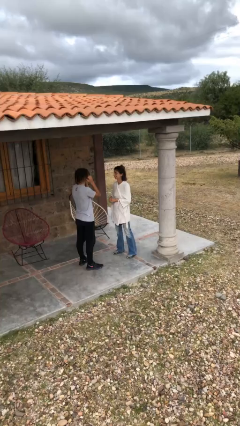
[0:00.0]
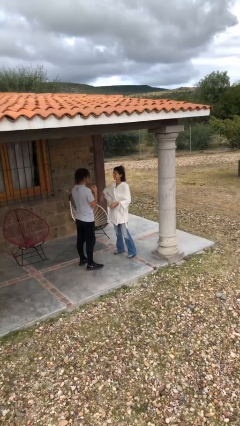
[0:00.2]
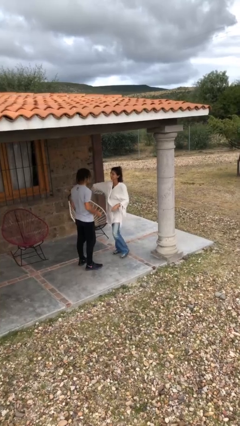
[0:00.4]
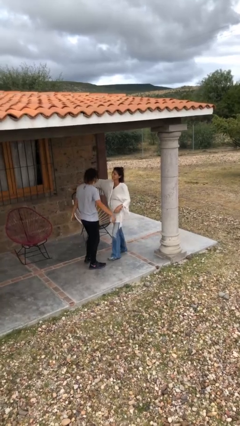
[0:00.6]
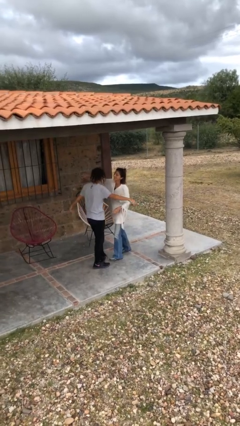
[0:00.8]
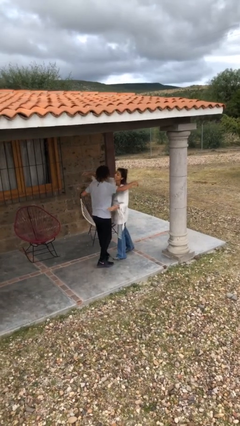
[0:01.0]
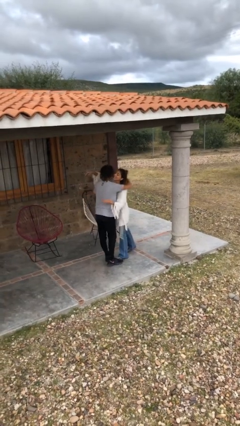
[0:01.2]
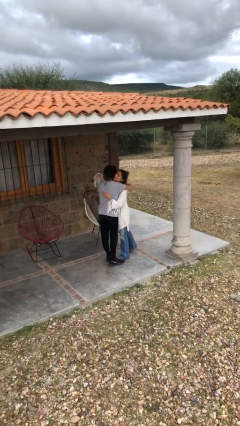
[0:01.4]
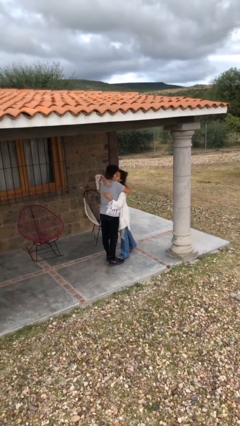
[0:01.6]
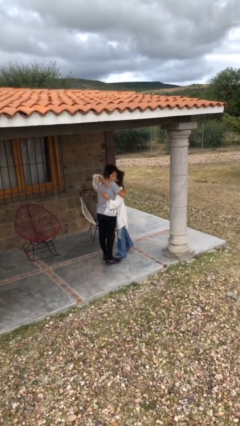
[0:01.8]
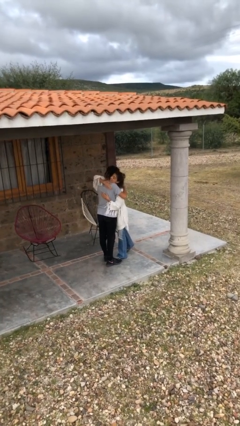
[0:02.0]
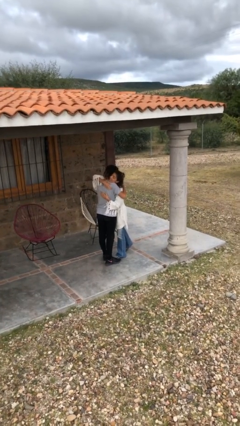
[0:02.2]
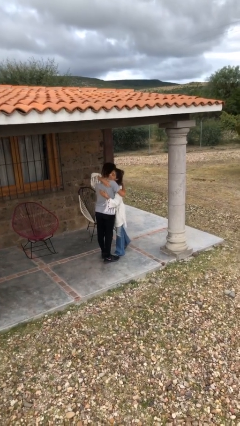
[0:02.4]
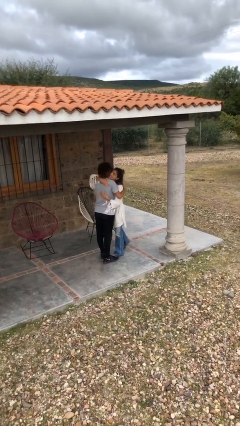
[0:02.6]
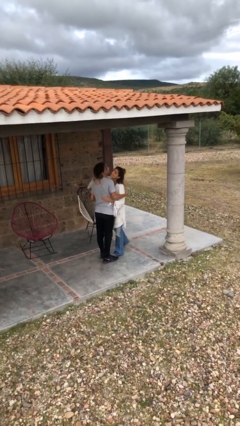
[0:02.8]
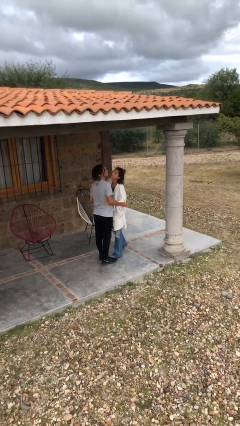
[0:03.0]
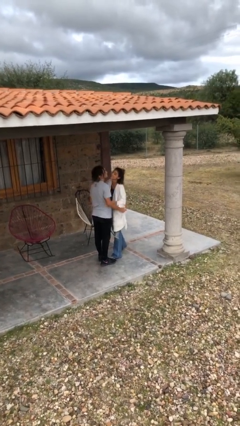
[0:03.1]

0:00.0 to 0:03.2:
person embraces person

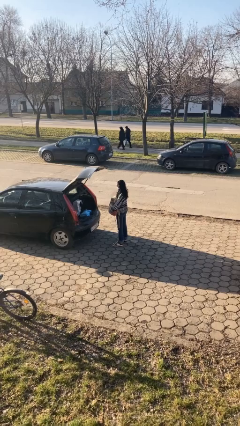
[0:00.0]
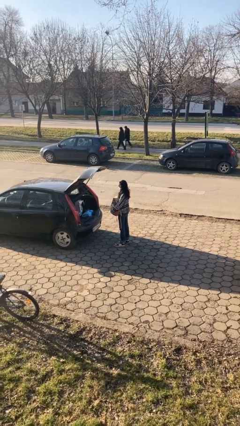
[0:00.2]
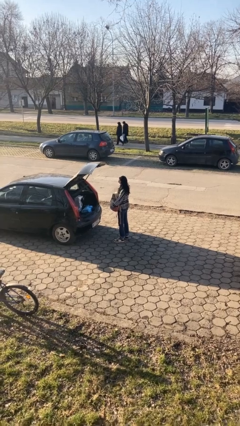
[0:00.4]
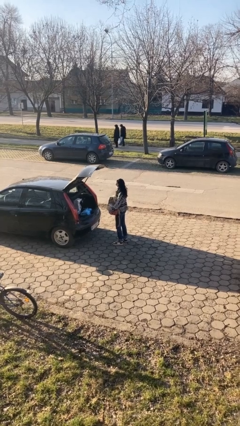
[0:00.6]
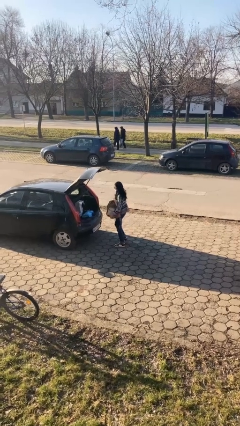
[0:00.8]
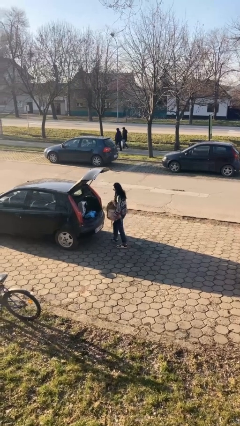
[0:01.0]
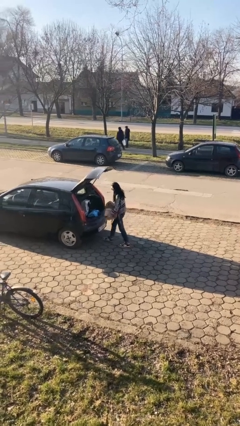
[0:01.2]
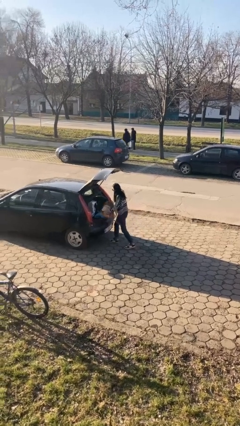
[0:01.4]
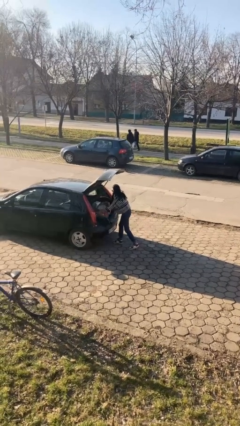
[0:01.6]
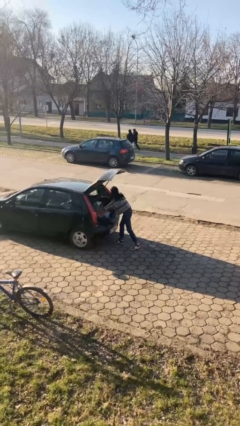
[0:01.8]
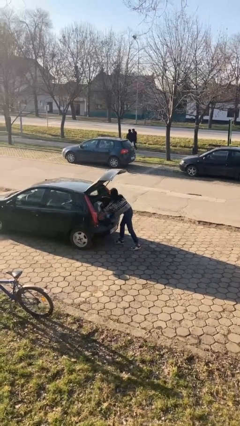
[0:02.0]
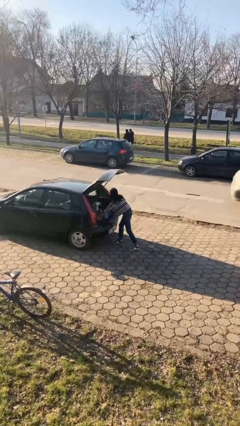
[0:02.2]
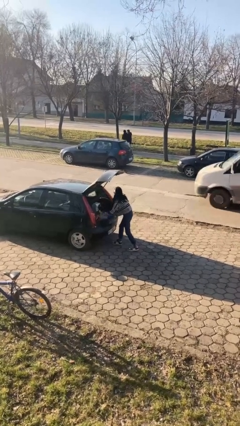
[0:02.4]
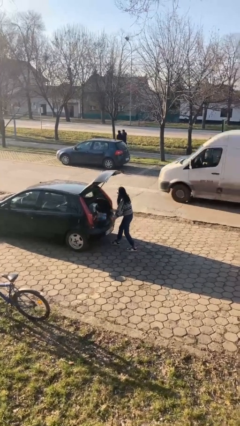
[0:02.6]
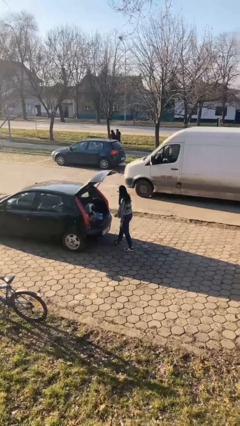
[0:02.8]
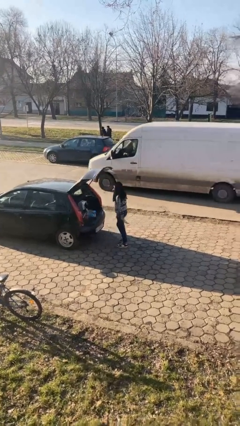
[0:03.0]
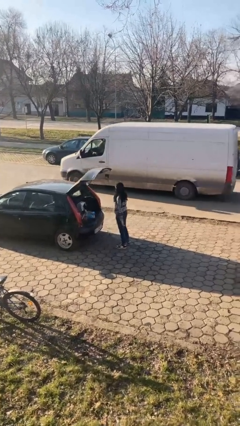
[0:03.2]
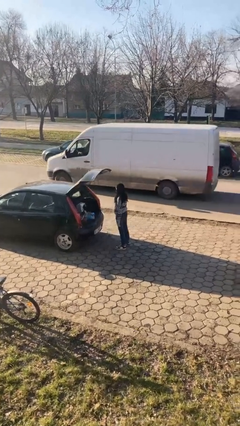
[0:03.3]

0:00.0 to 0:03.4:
person loads car

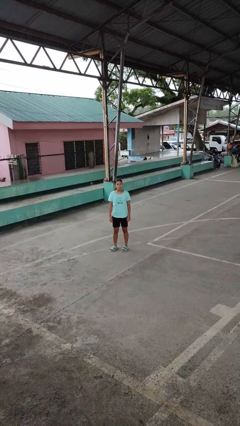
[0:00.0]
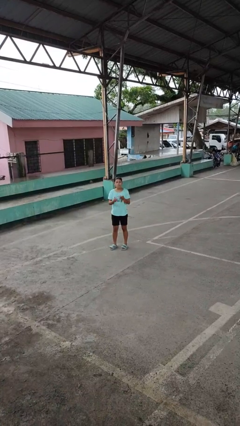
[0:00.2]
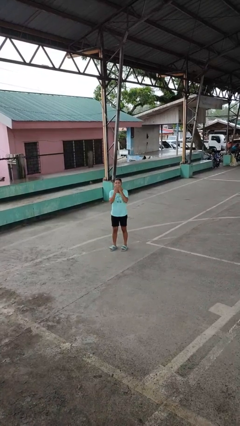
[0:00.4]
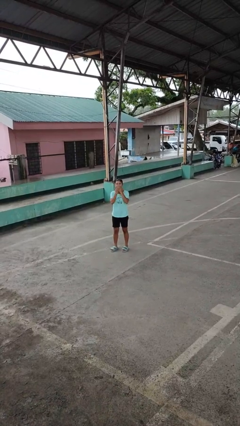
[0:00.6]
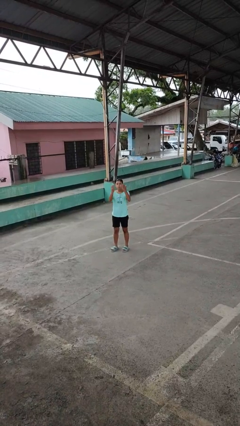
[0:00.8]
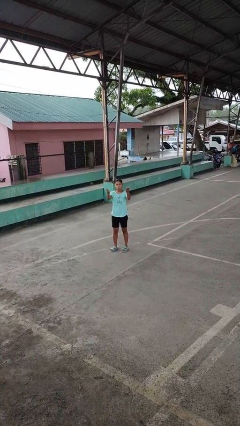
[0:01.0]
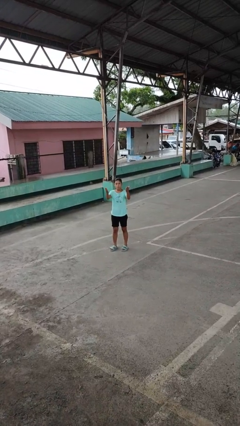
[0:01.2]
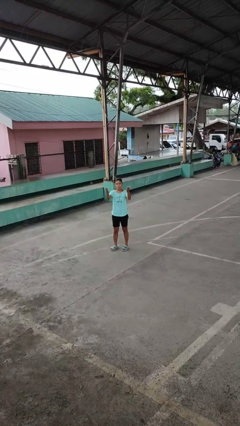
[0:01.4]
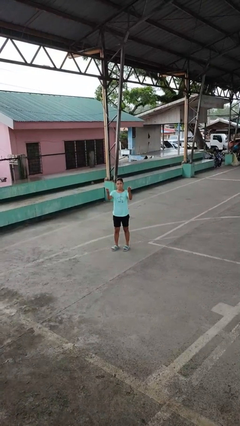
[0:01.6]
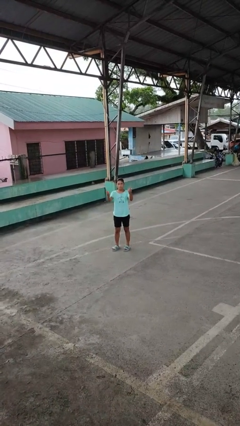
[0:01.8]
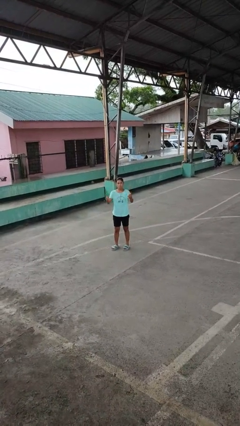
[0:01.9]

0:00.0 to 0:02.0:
person gestures blow kiss

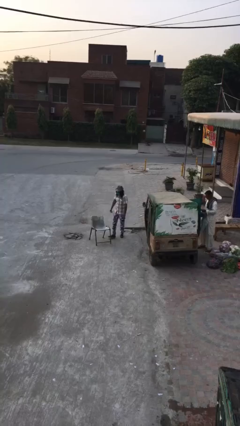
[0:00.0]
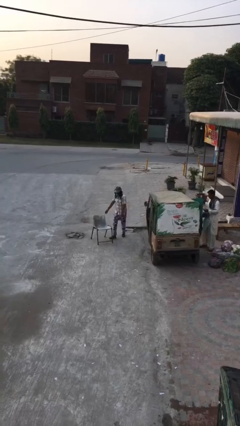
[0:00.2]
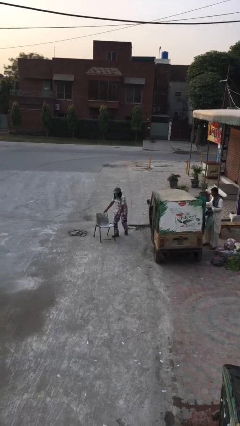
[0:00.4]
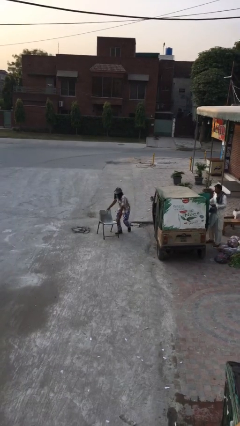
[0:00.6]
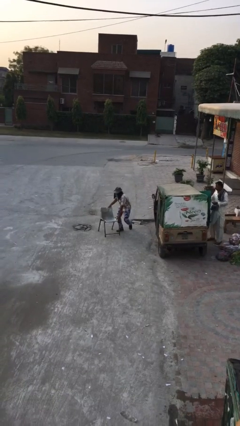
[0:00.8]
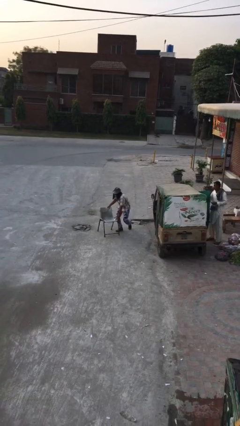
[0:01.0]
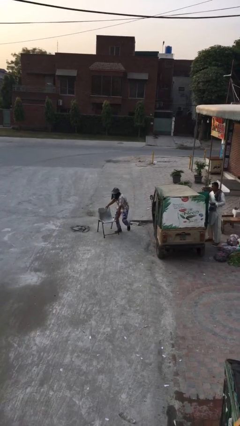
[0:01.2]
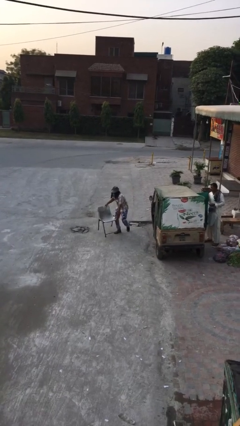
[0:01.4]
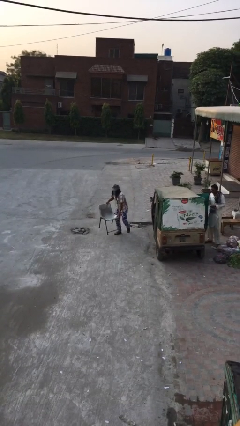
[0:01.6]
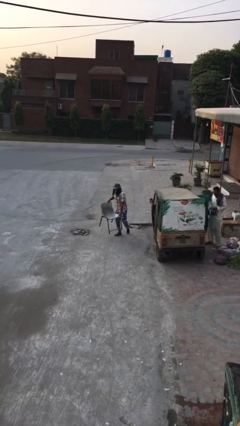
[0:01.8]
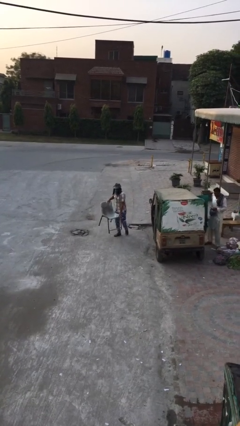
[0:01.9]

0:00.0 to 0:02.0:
person picks up object from floor

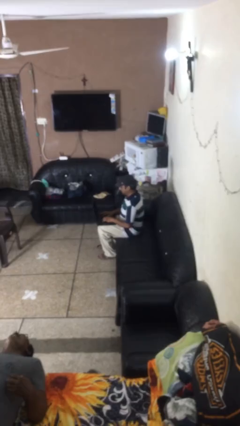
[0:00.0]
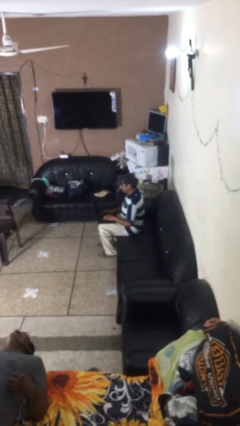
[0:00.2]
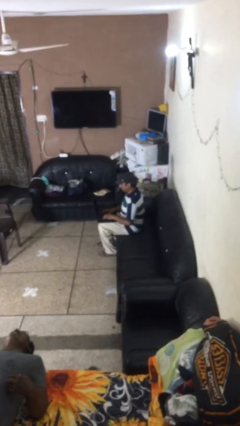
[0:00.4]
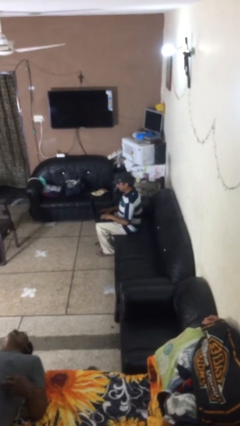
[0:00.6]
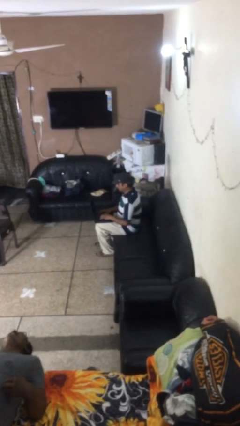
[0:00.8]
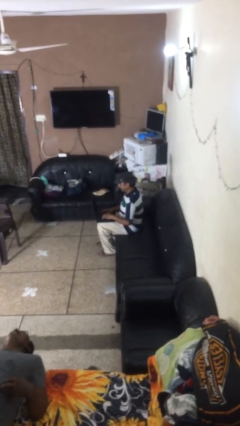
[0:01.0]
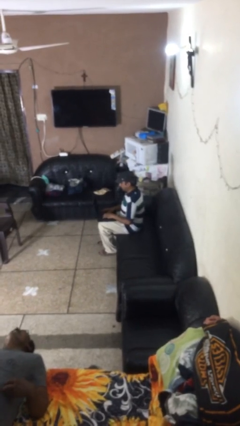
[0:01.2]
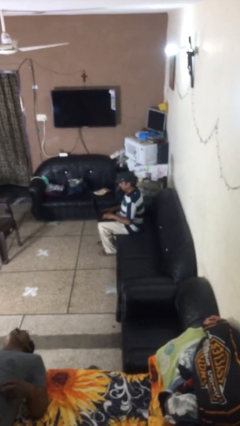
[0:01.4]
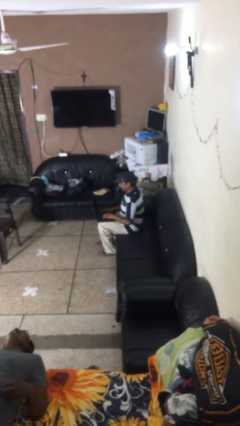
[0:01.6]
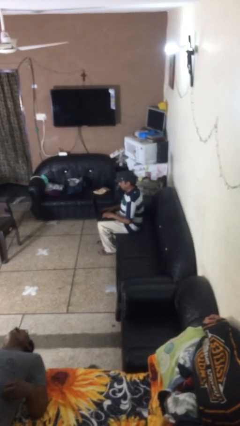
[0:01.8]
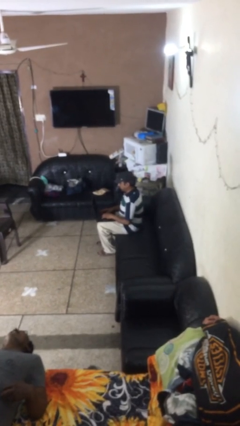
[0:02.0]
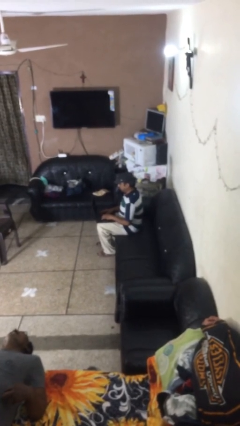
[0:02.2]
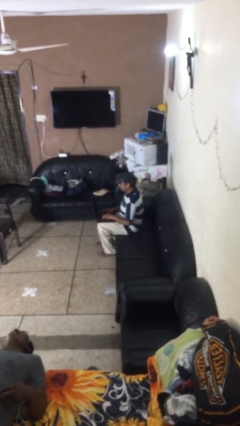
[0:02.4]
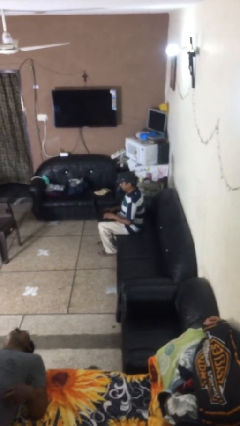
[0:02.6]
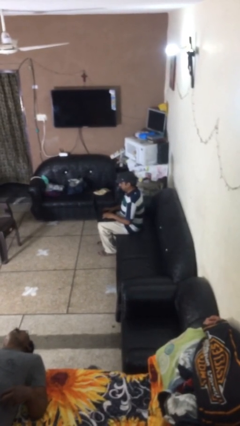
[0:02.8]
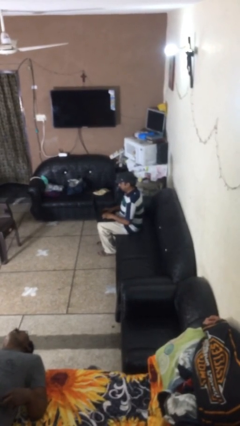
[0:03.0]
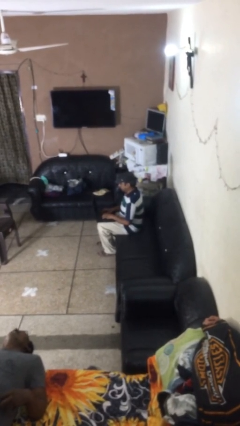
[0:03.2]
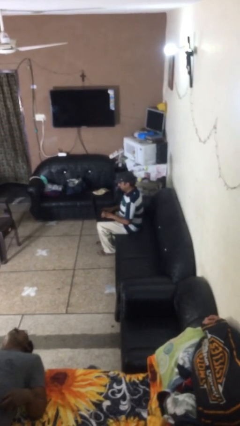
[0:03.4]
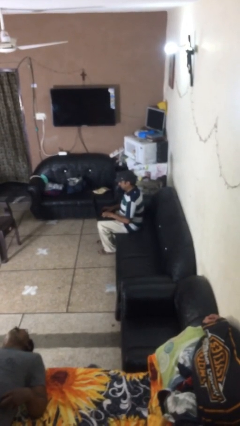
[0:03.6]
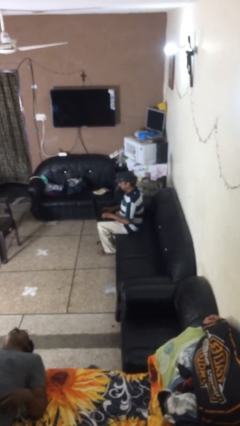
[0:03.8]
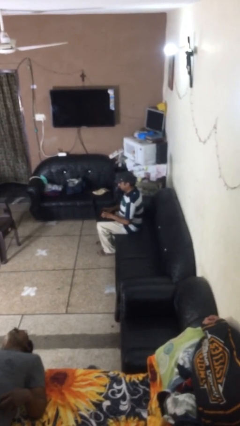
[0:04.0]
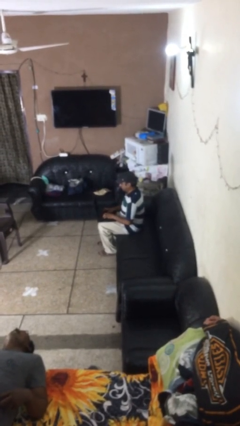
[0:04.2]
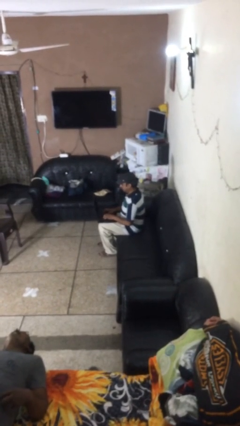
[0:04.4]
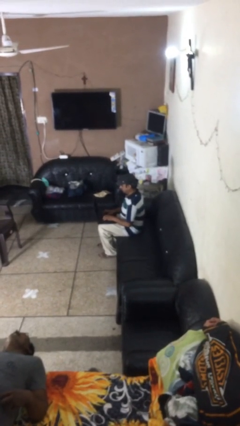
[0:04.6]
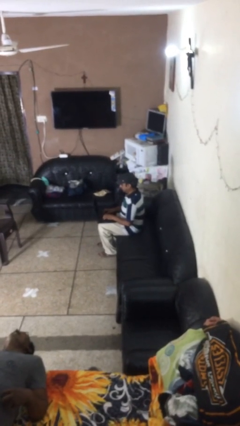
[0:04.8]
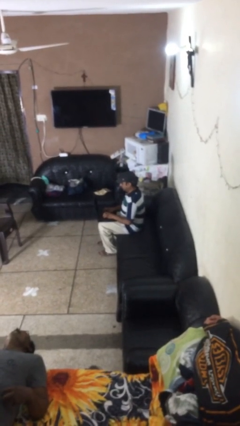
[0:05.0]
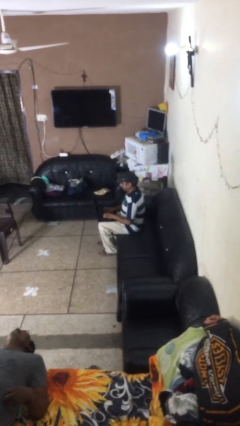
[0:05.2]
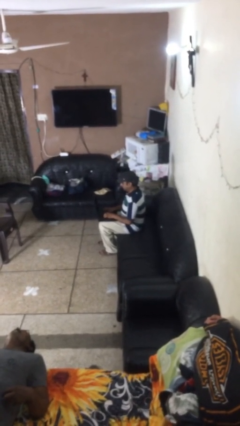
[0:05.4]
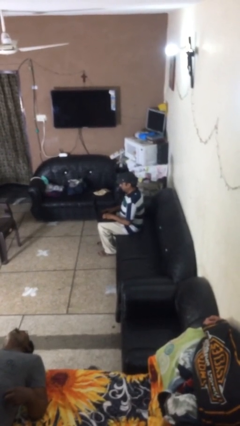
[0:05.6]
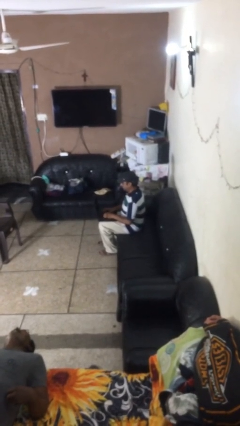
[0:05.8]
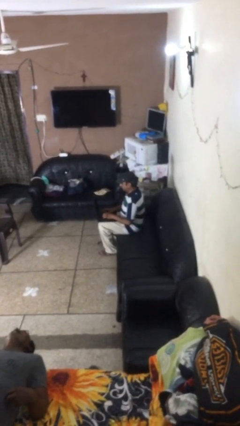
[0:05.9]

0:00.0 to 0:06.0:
person interacts with laptop

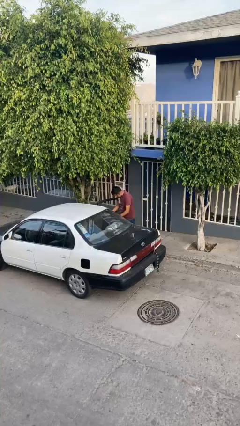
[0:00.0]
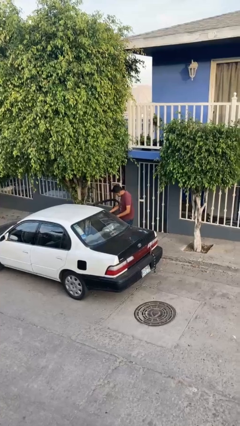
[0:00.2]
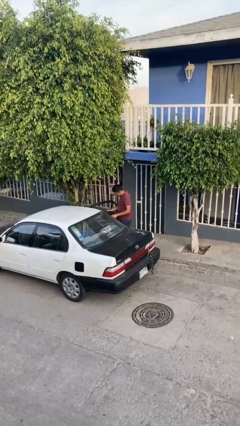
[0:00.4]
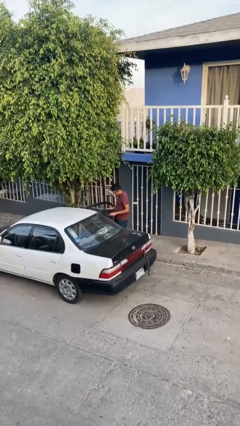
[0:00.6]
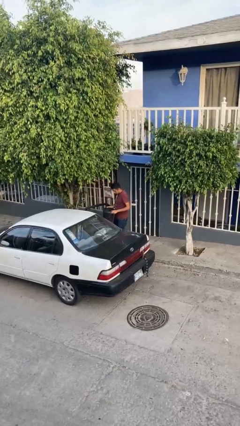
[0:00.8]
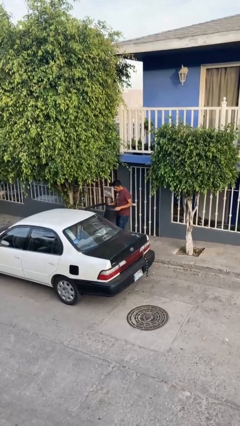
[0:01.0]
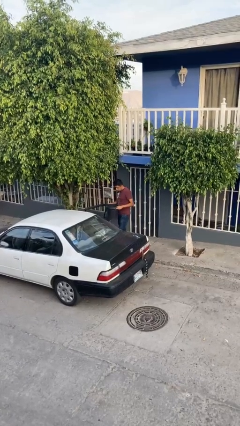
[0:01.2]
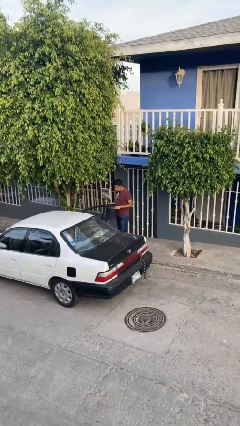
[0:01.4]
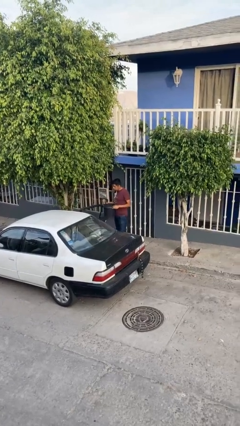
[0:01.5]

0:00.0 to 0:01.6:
person unloads car
